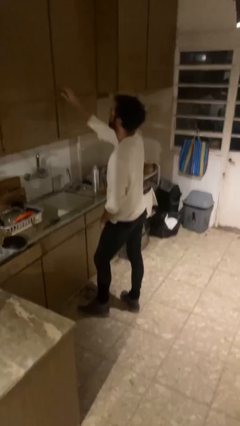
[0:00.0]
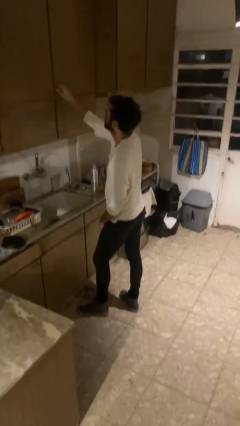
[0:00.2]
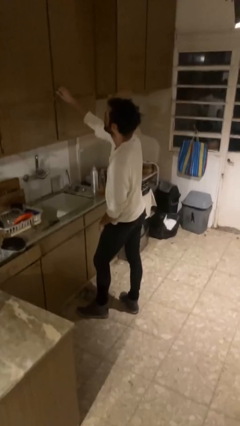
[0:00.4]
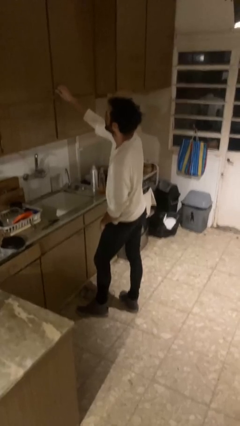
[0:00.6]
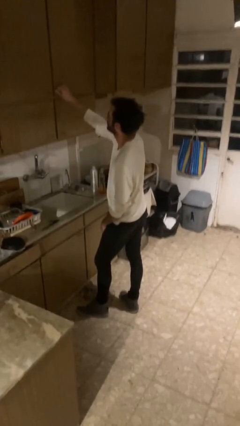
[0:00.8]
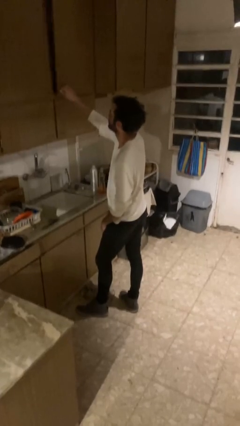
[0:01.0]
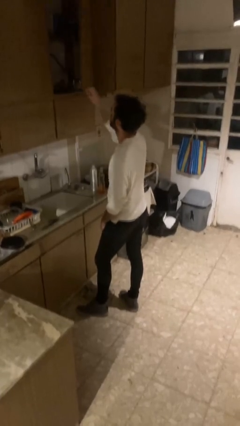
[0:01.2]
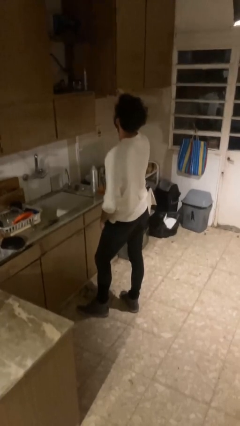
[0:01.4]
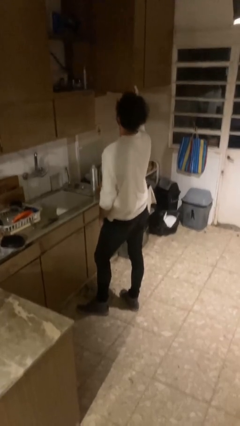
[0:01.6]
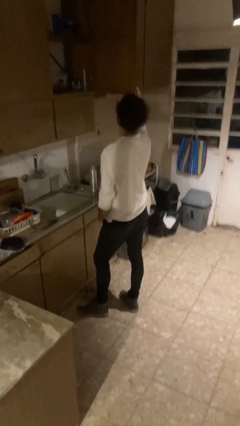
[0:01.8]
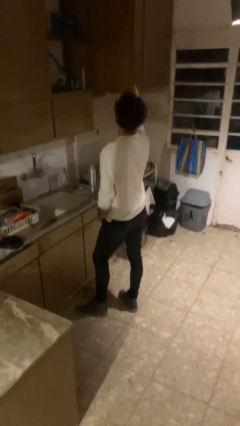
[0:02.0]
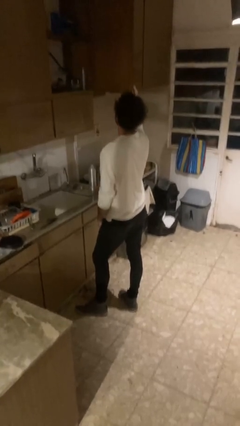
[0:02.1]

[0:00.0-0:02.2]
person closes cabinet

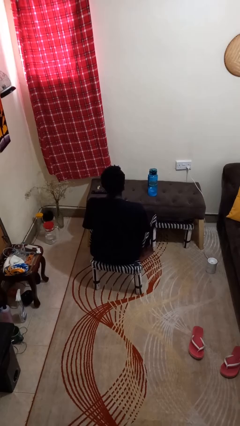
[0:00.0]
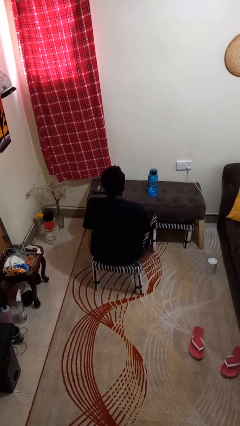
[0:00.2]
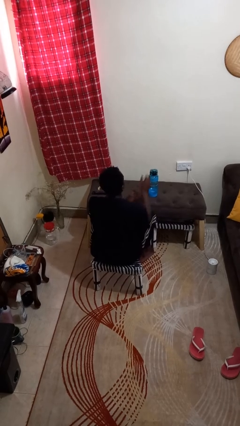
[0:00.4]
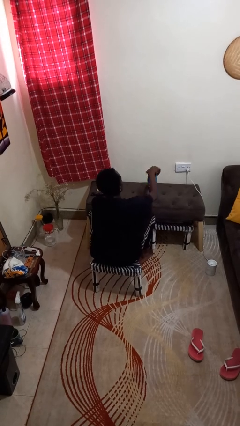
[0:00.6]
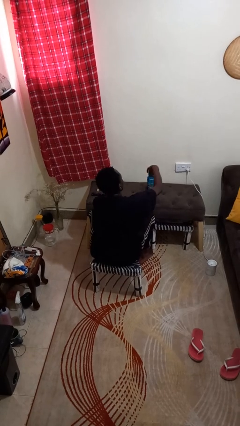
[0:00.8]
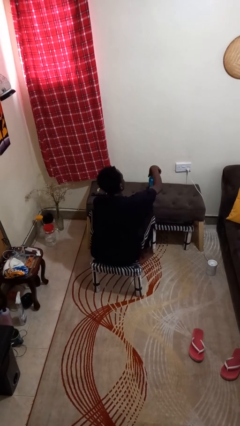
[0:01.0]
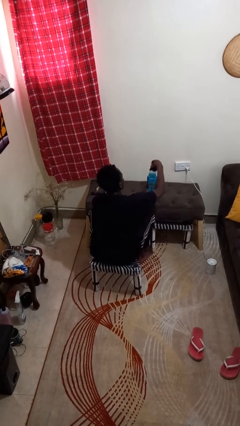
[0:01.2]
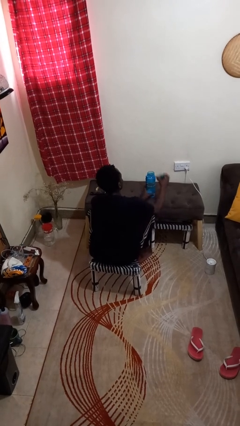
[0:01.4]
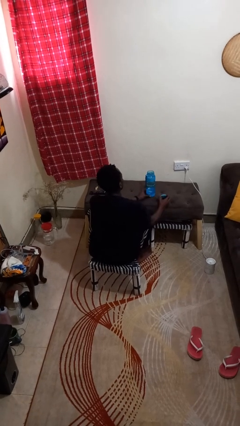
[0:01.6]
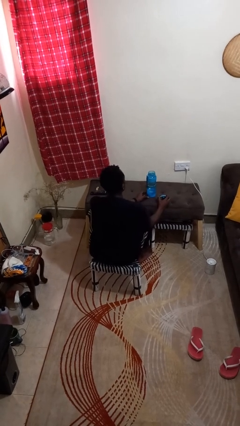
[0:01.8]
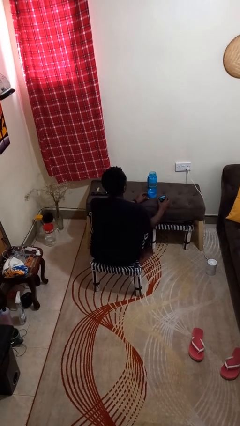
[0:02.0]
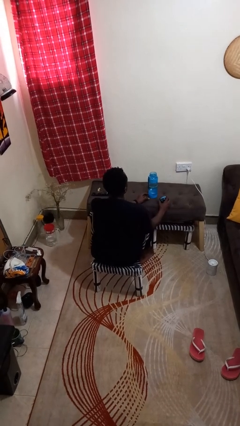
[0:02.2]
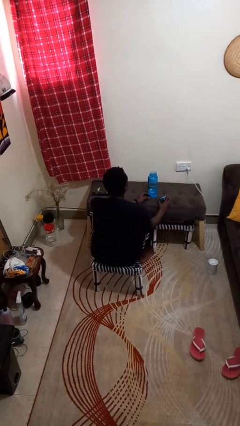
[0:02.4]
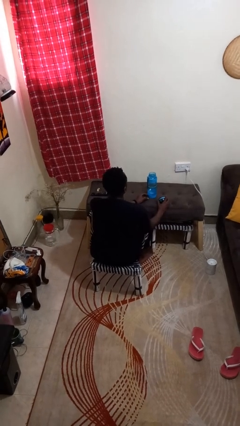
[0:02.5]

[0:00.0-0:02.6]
person opens jar

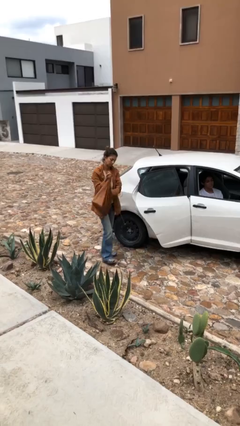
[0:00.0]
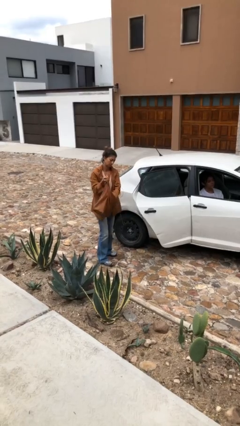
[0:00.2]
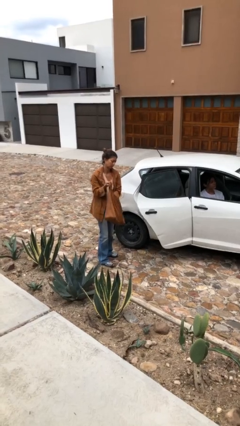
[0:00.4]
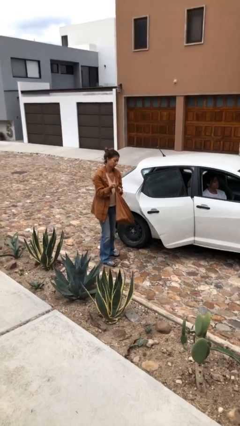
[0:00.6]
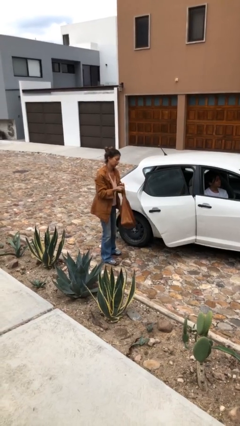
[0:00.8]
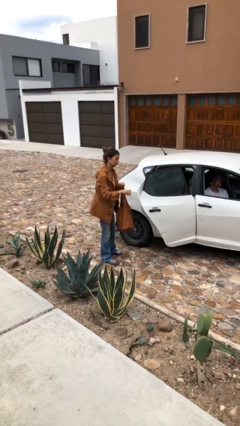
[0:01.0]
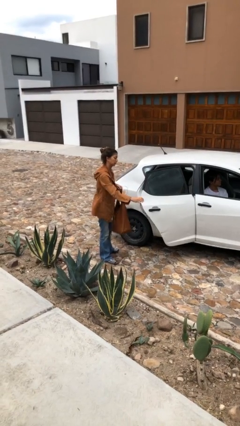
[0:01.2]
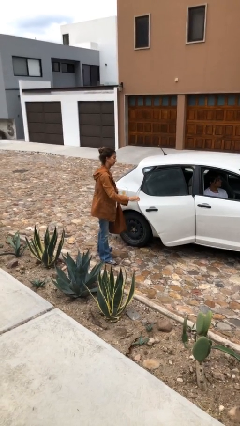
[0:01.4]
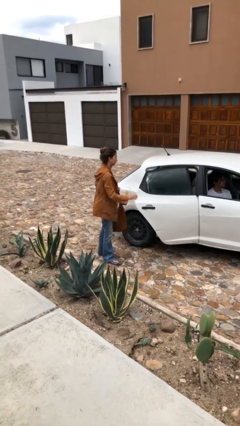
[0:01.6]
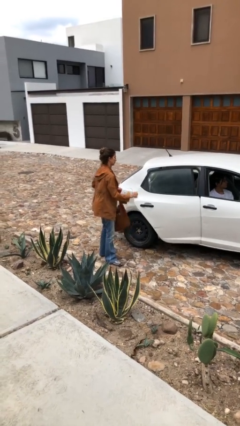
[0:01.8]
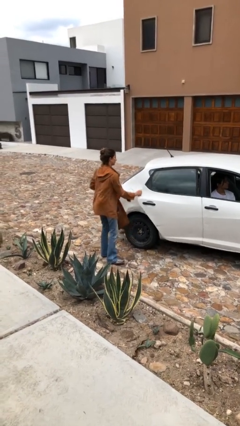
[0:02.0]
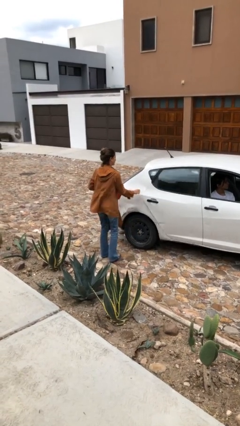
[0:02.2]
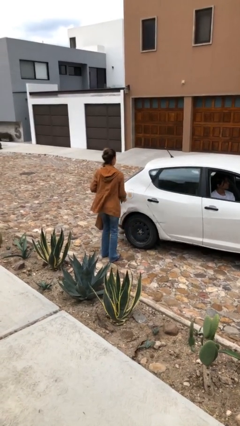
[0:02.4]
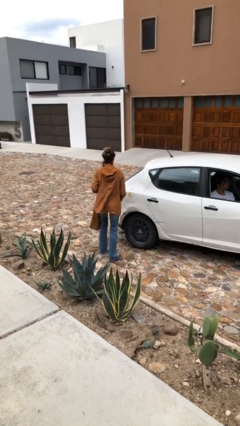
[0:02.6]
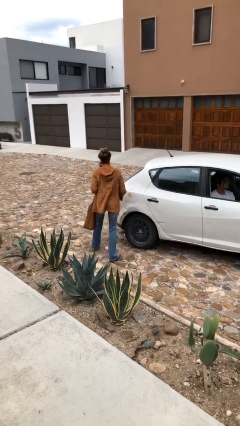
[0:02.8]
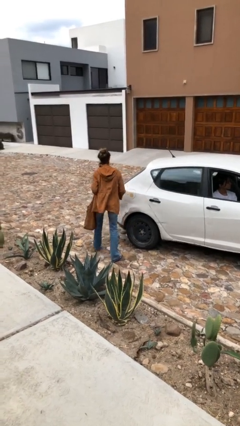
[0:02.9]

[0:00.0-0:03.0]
person closes car door

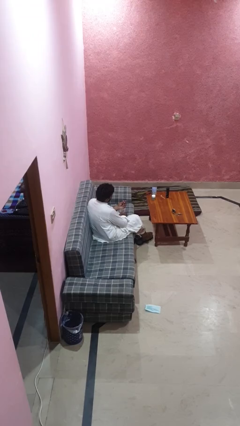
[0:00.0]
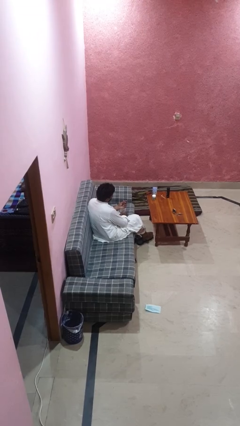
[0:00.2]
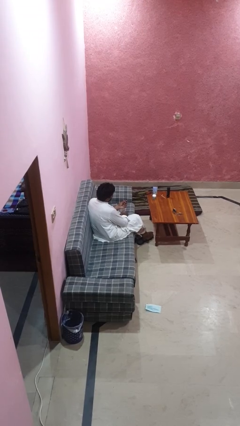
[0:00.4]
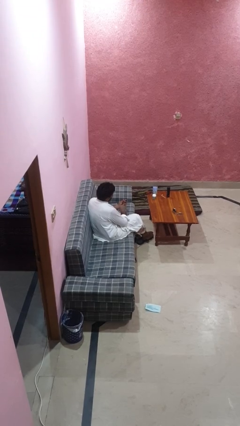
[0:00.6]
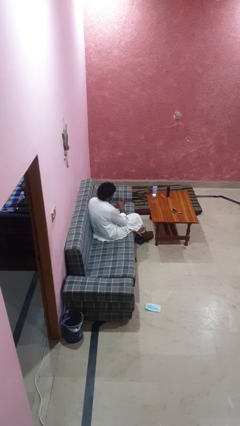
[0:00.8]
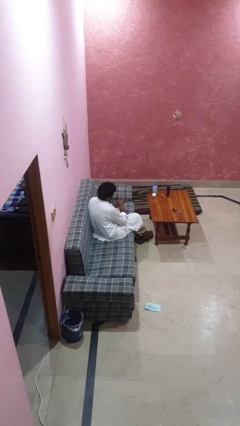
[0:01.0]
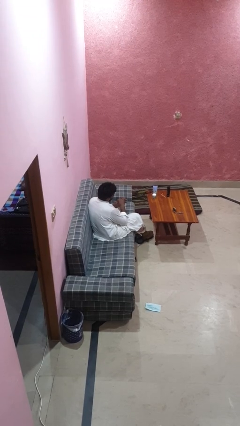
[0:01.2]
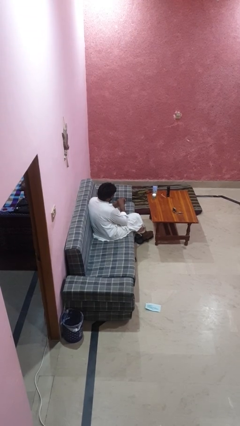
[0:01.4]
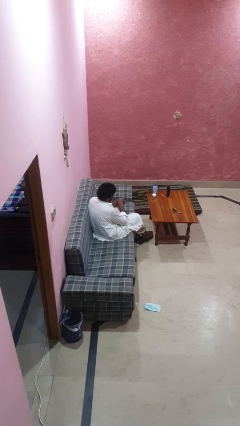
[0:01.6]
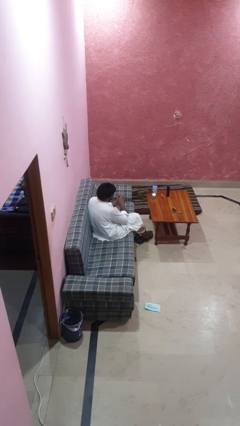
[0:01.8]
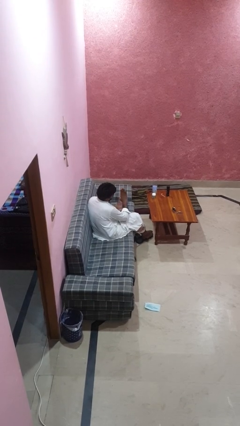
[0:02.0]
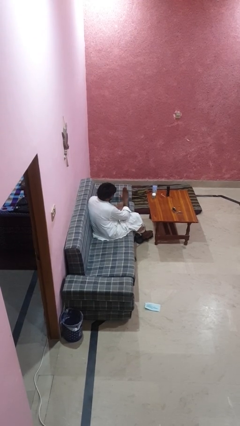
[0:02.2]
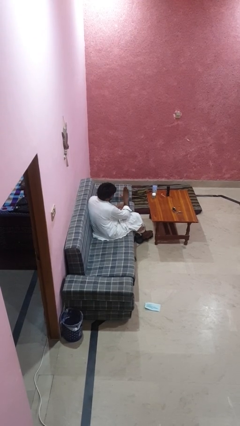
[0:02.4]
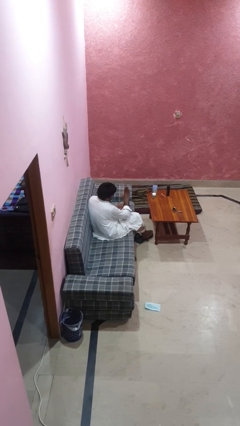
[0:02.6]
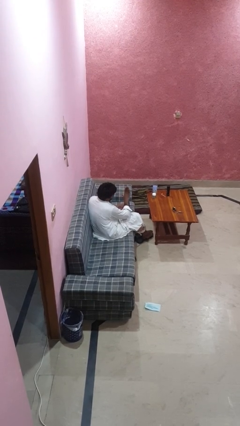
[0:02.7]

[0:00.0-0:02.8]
person puts on ring

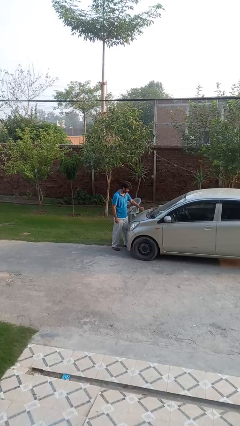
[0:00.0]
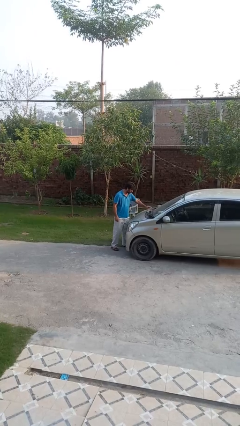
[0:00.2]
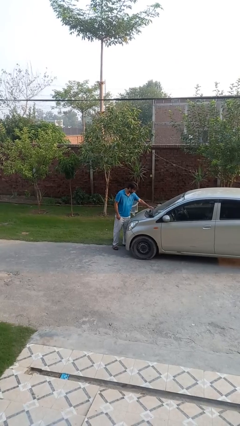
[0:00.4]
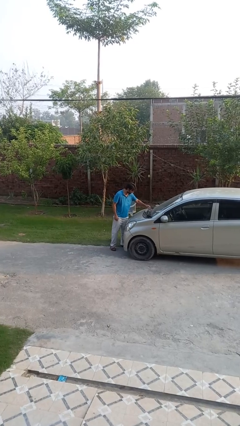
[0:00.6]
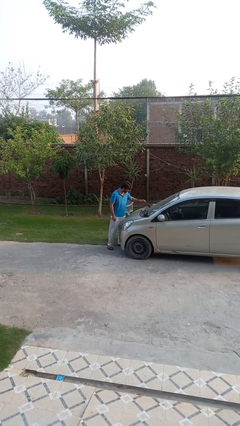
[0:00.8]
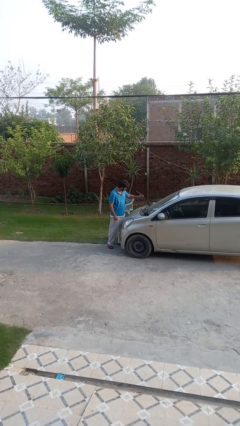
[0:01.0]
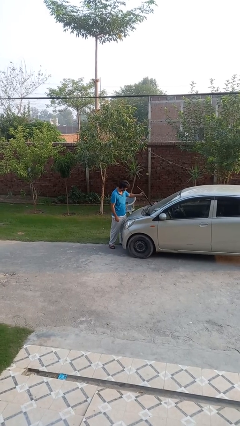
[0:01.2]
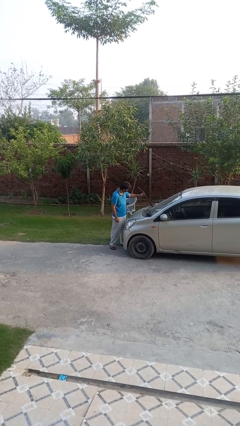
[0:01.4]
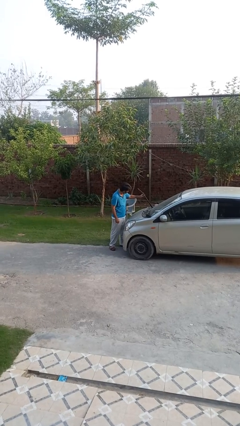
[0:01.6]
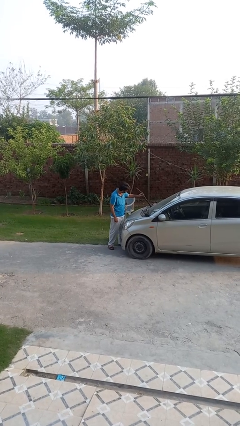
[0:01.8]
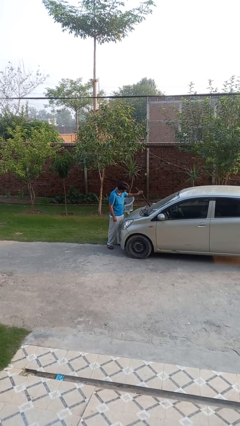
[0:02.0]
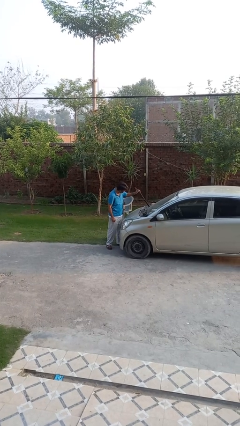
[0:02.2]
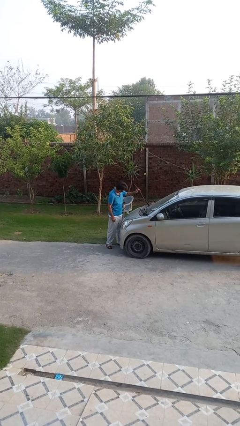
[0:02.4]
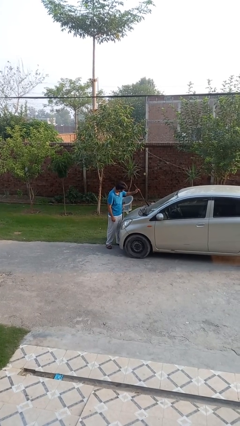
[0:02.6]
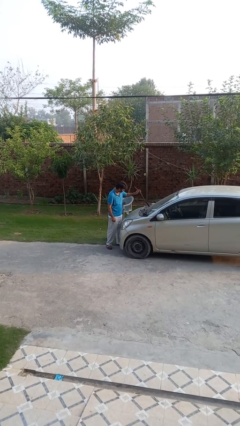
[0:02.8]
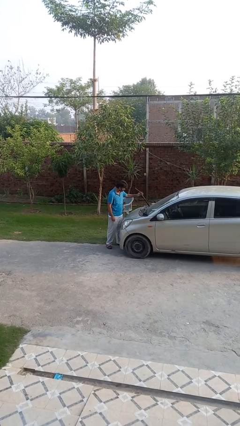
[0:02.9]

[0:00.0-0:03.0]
person flips up car wipers

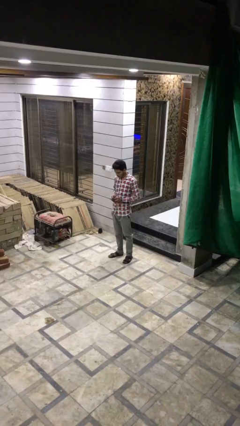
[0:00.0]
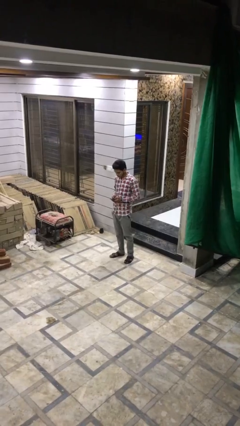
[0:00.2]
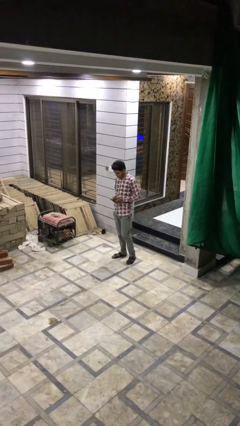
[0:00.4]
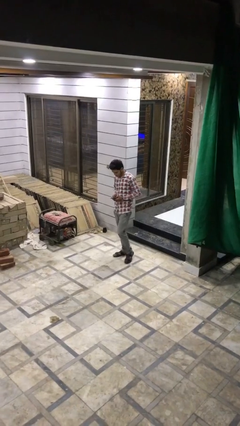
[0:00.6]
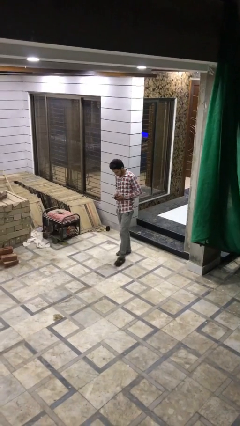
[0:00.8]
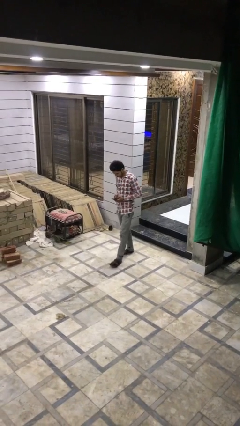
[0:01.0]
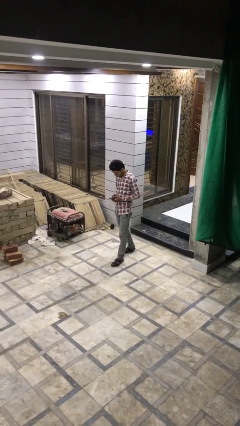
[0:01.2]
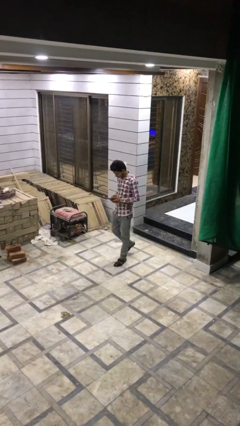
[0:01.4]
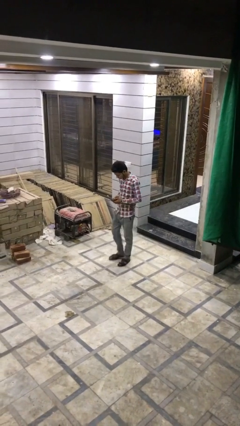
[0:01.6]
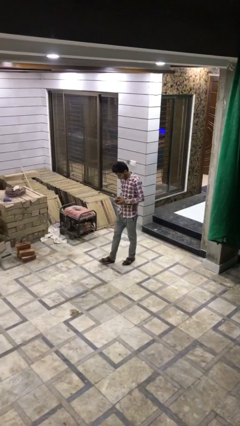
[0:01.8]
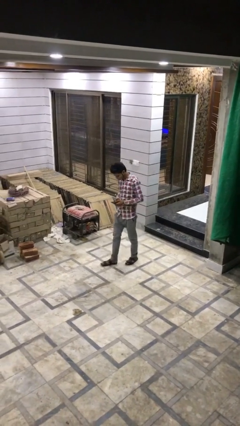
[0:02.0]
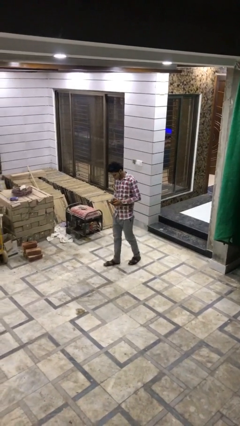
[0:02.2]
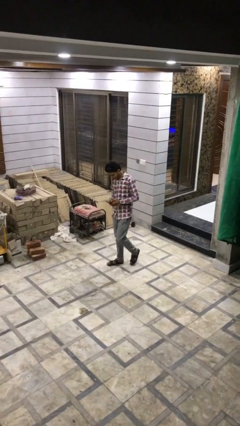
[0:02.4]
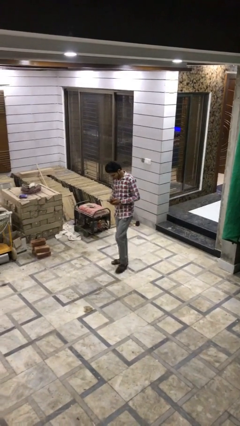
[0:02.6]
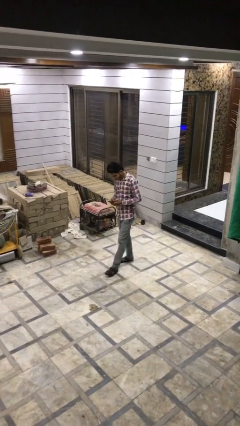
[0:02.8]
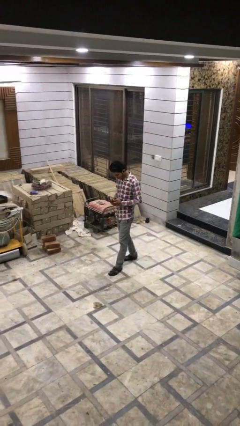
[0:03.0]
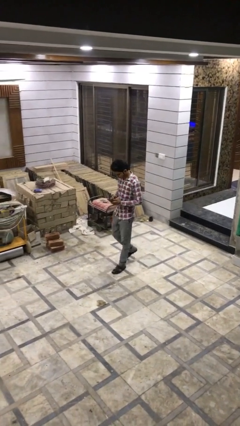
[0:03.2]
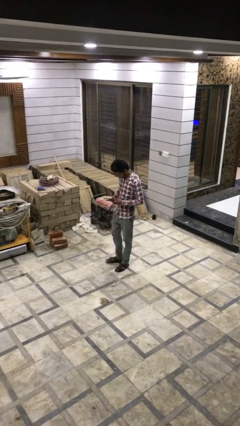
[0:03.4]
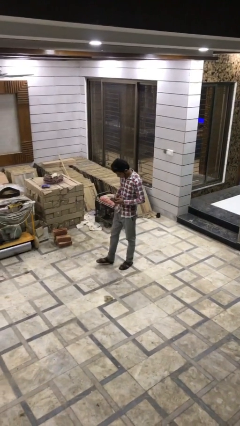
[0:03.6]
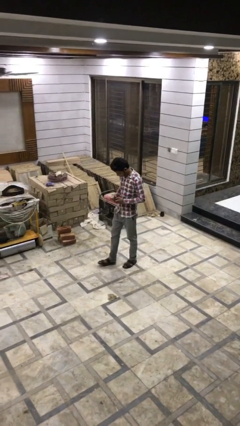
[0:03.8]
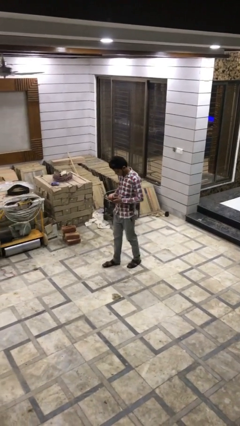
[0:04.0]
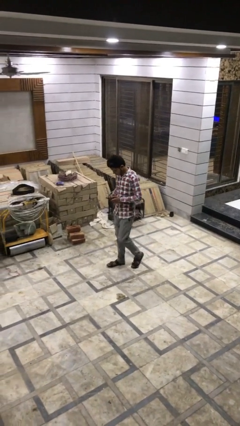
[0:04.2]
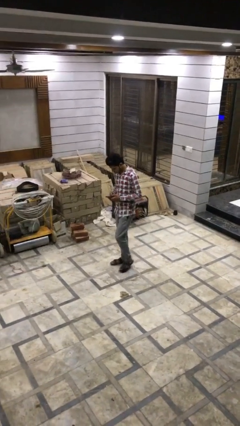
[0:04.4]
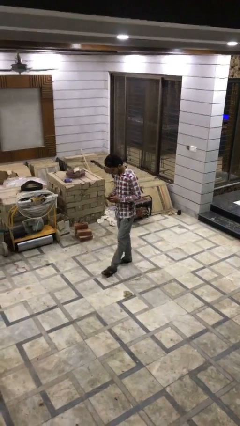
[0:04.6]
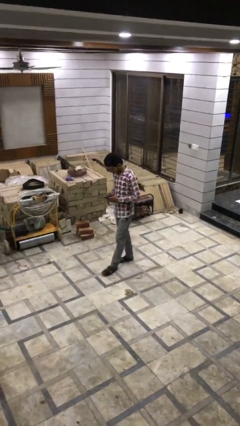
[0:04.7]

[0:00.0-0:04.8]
person texts on phone
